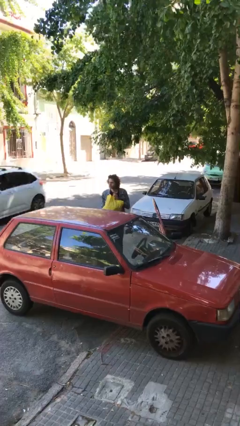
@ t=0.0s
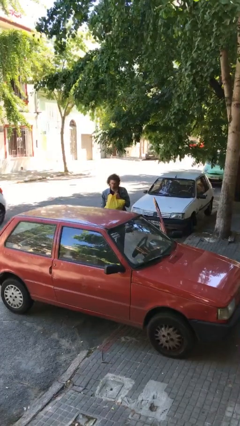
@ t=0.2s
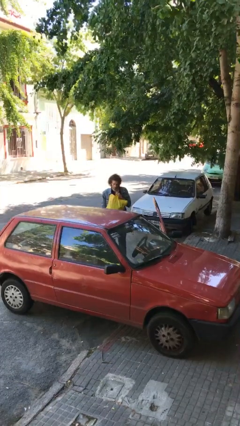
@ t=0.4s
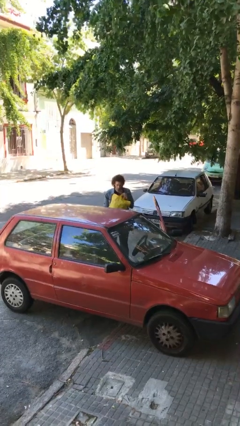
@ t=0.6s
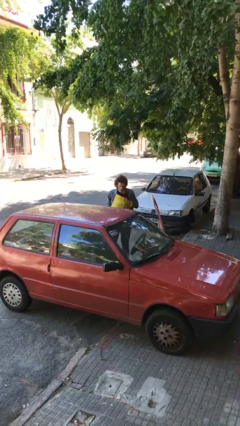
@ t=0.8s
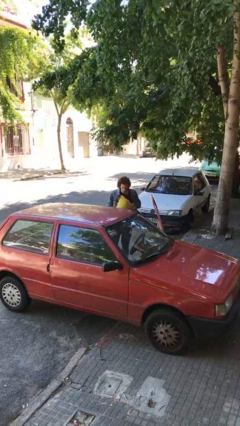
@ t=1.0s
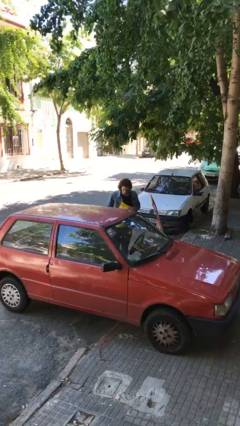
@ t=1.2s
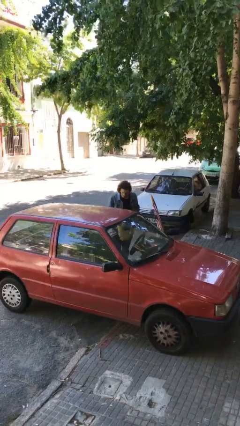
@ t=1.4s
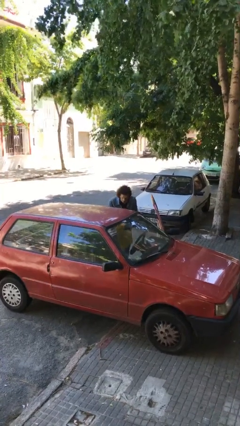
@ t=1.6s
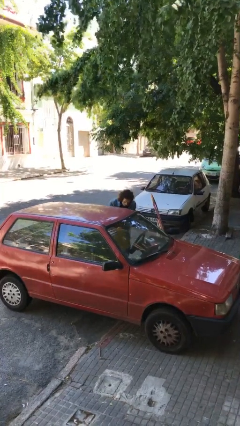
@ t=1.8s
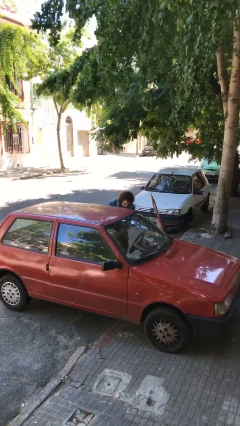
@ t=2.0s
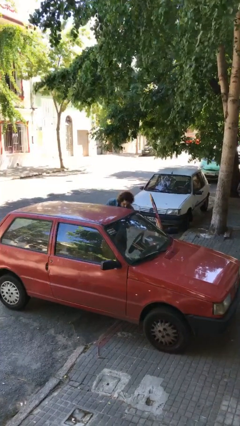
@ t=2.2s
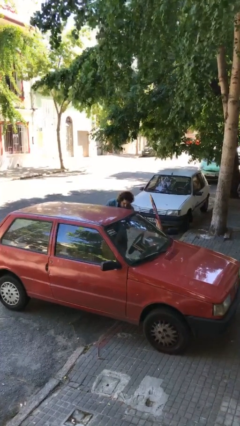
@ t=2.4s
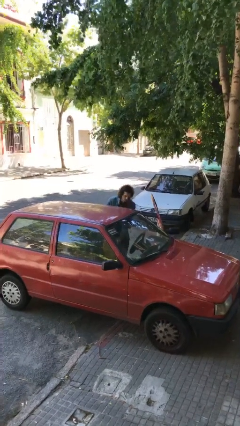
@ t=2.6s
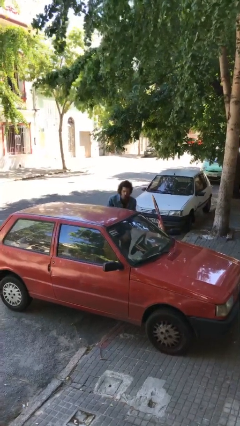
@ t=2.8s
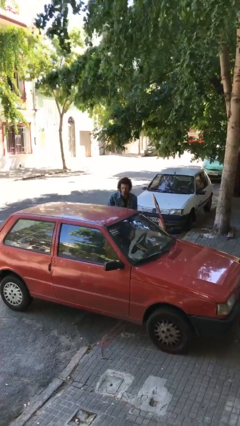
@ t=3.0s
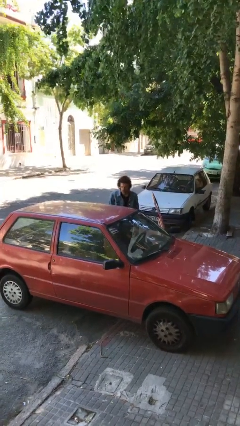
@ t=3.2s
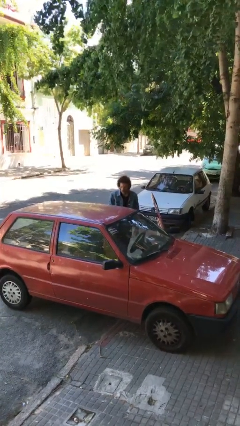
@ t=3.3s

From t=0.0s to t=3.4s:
person loads car

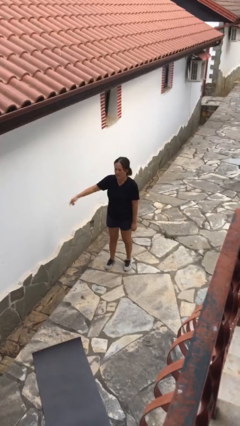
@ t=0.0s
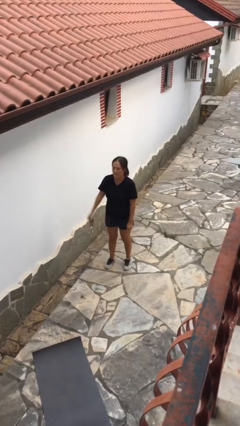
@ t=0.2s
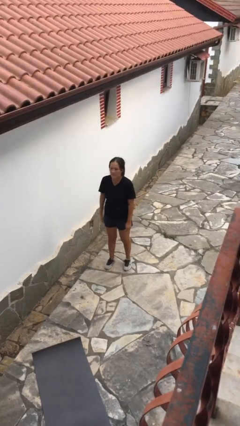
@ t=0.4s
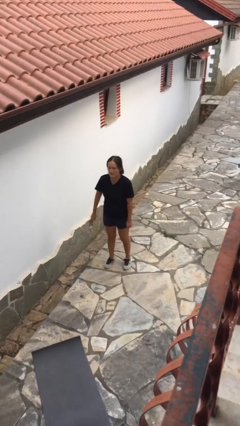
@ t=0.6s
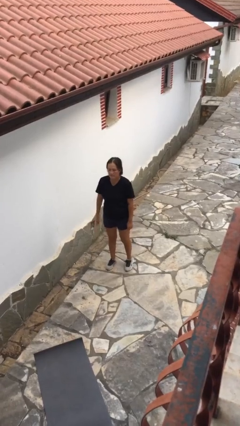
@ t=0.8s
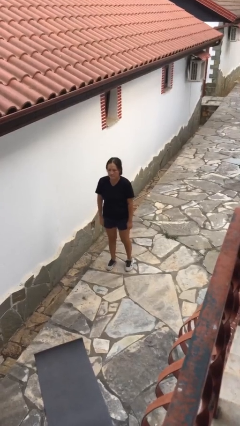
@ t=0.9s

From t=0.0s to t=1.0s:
person gestures swipe right

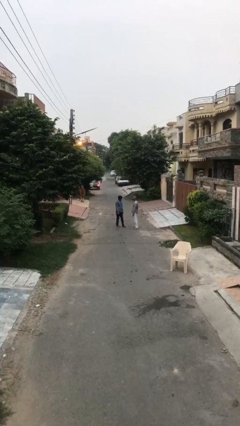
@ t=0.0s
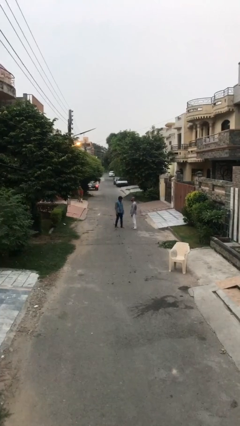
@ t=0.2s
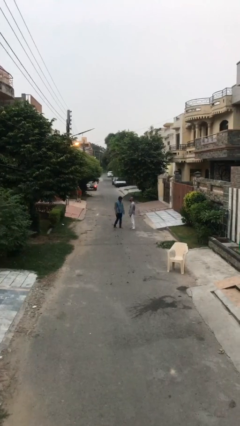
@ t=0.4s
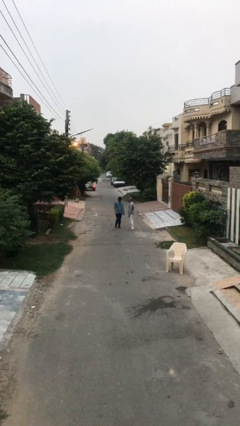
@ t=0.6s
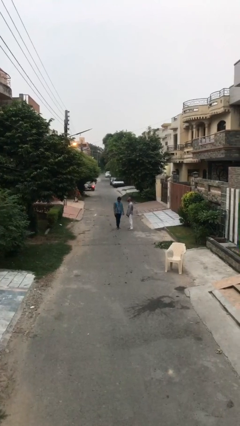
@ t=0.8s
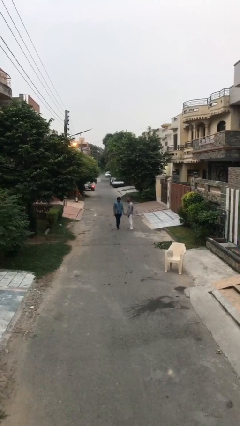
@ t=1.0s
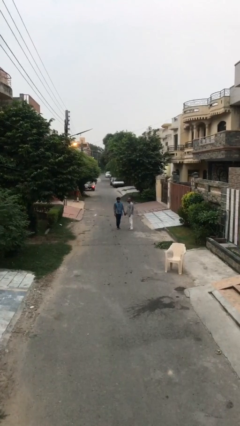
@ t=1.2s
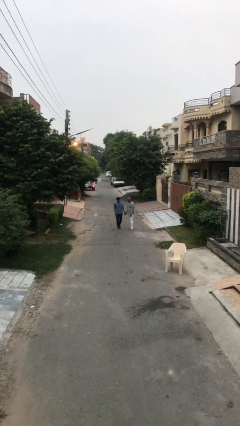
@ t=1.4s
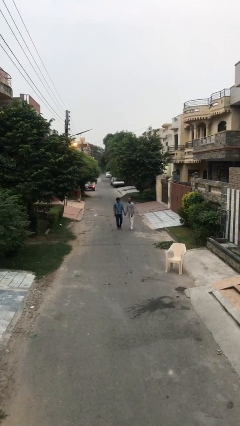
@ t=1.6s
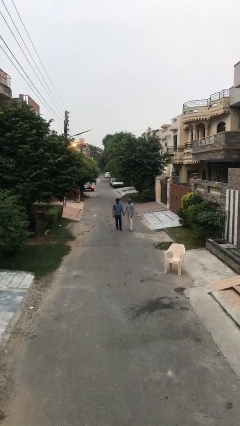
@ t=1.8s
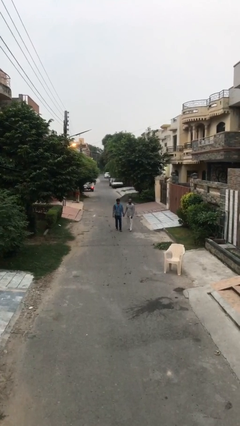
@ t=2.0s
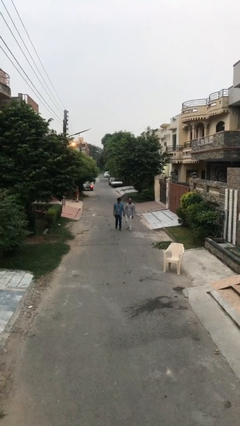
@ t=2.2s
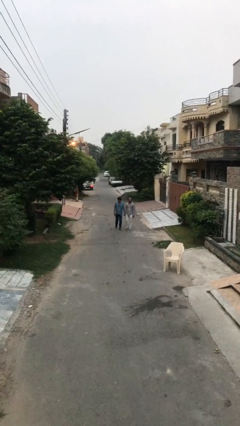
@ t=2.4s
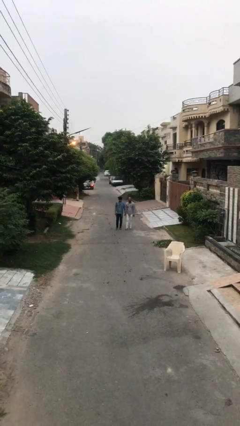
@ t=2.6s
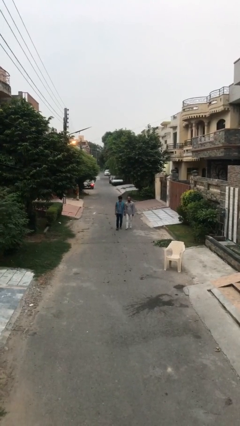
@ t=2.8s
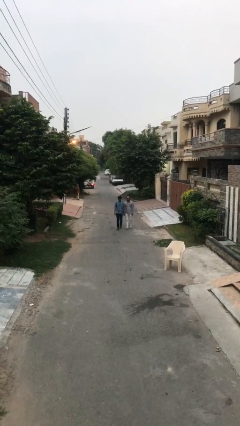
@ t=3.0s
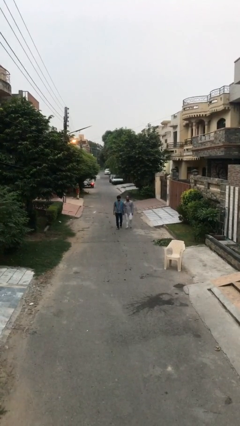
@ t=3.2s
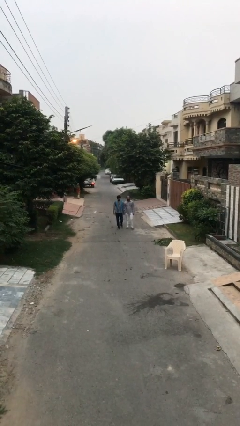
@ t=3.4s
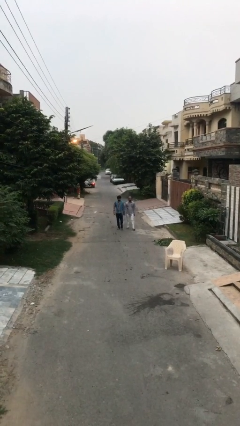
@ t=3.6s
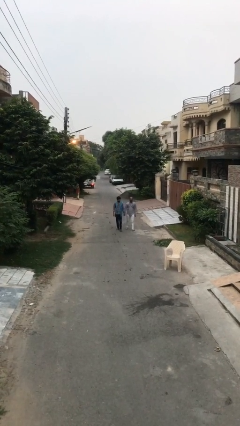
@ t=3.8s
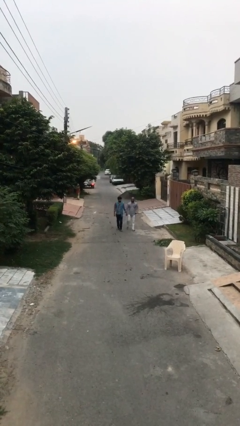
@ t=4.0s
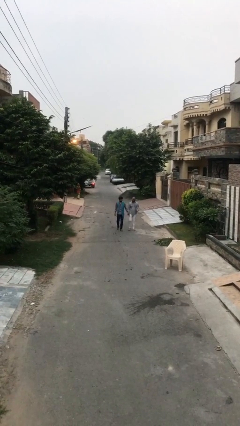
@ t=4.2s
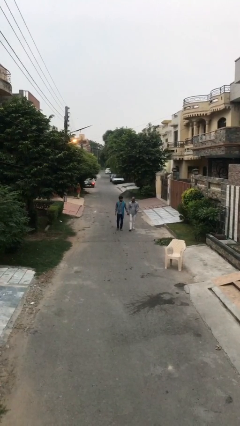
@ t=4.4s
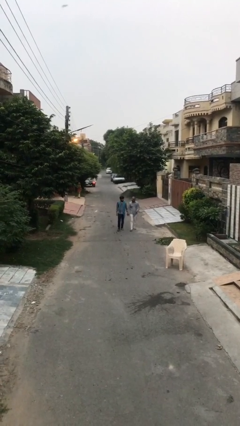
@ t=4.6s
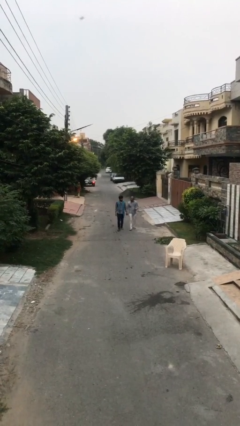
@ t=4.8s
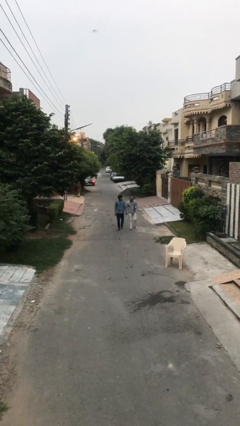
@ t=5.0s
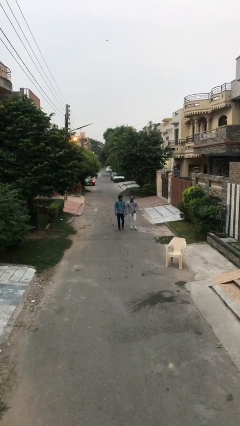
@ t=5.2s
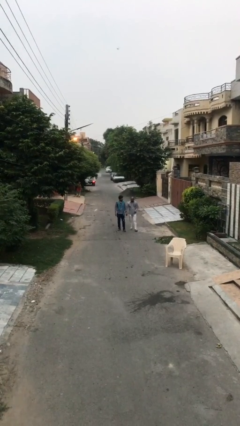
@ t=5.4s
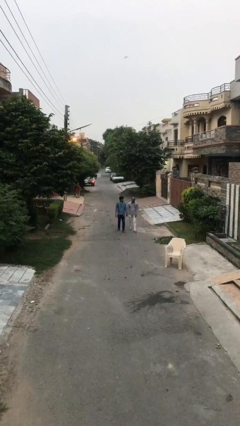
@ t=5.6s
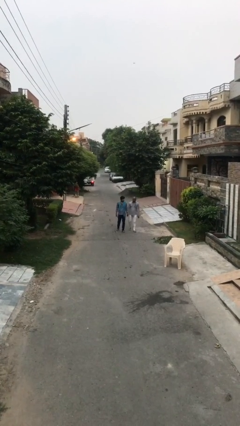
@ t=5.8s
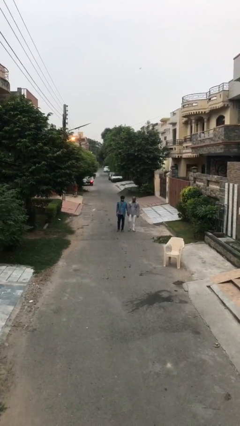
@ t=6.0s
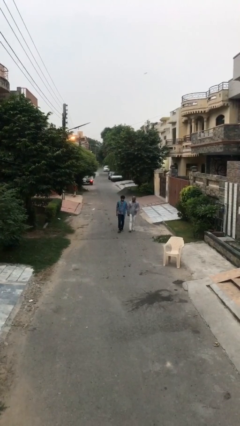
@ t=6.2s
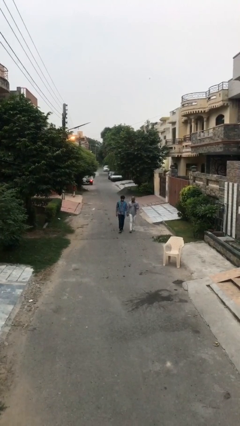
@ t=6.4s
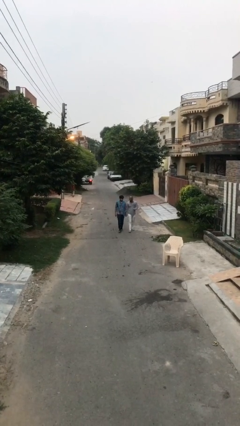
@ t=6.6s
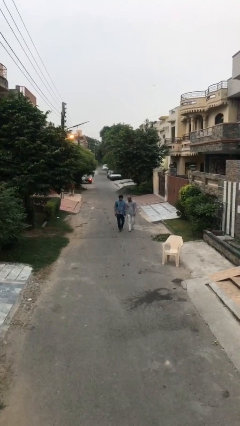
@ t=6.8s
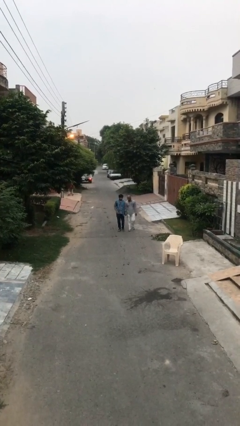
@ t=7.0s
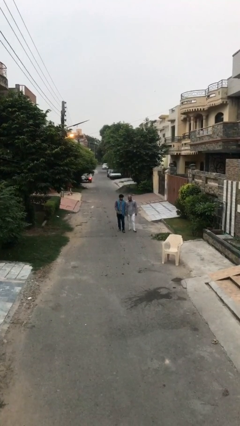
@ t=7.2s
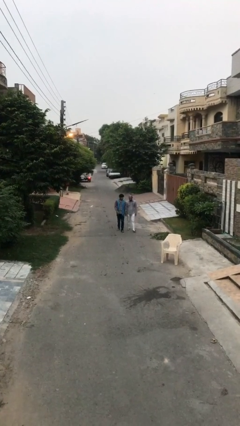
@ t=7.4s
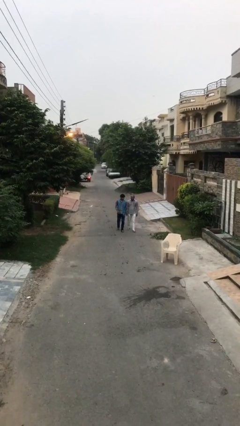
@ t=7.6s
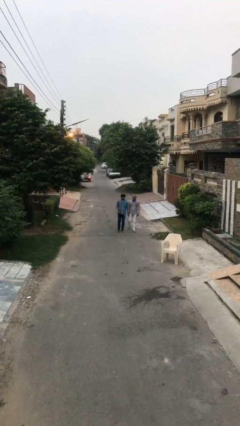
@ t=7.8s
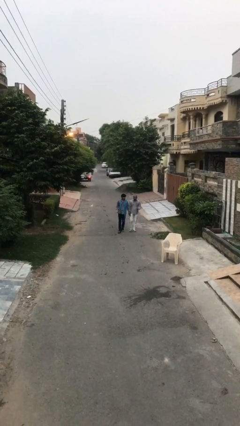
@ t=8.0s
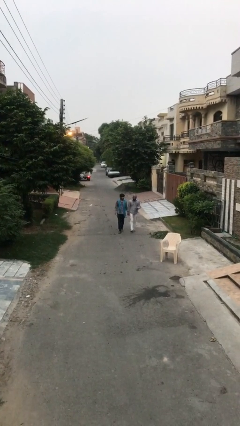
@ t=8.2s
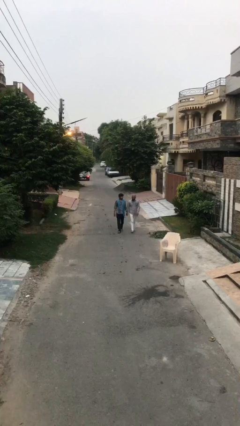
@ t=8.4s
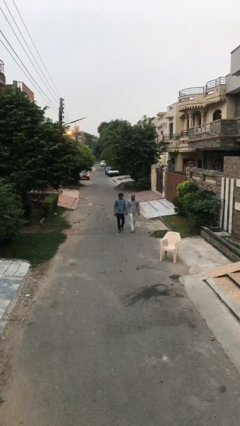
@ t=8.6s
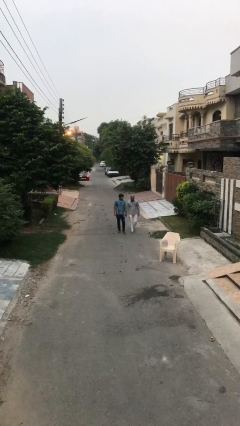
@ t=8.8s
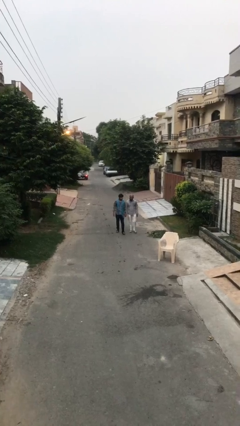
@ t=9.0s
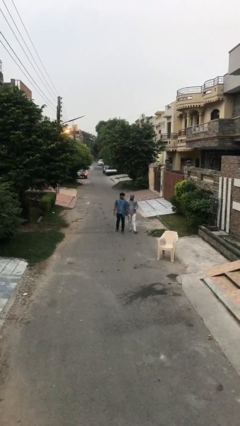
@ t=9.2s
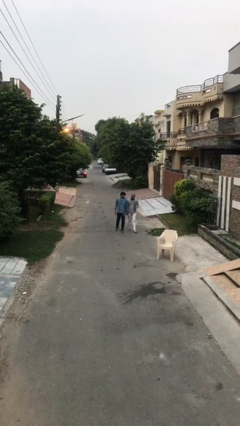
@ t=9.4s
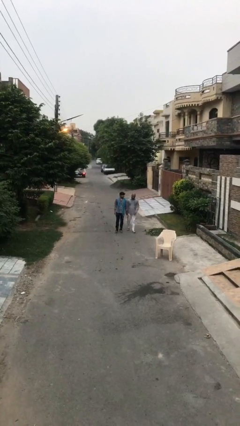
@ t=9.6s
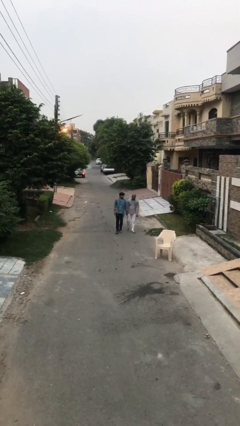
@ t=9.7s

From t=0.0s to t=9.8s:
person holds hand

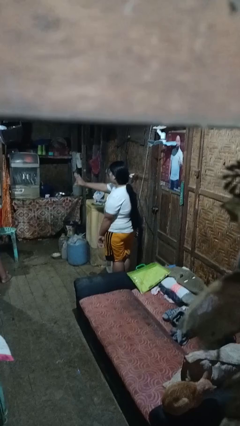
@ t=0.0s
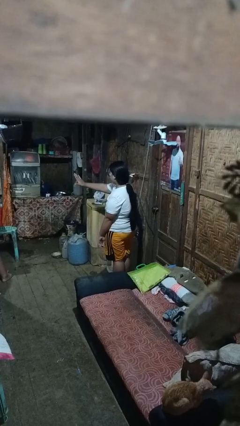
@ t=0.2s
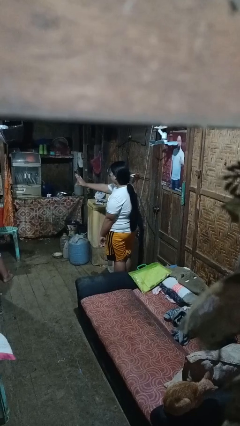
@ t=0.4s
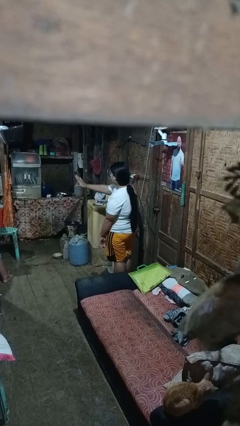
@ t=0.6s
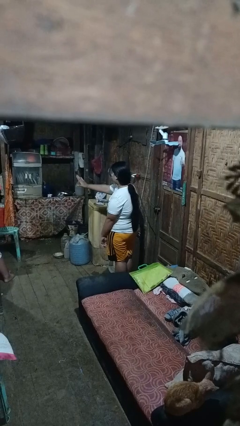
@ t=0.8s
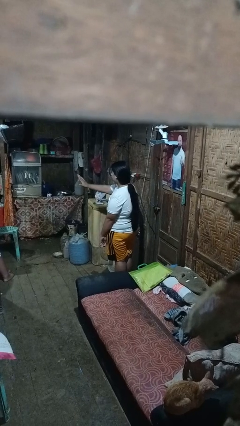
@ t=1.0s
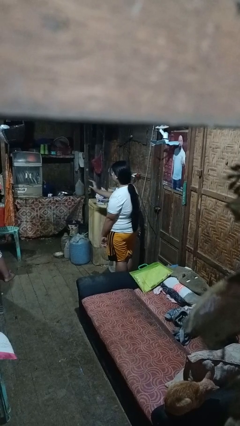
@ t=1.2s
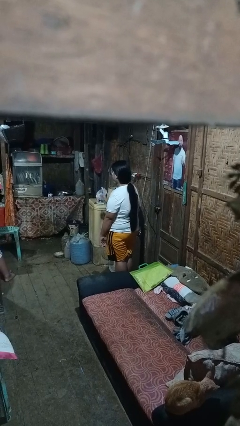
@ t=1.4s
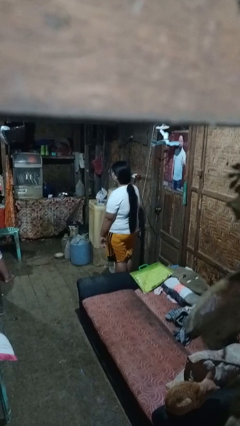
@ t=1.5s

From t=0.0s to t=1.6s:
person gestures stop

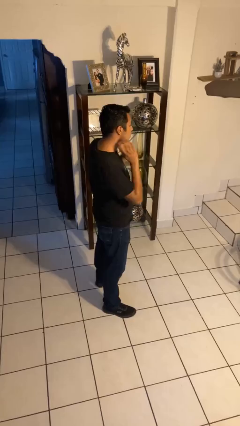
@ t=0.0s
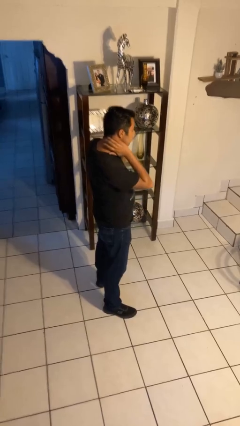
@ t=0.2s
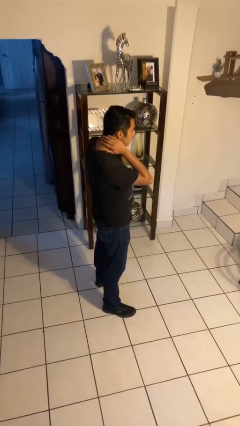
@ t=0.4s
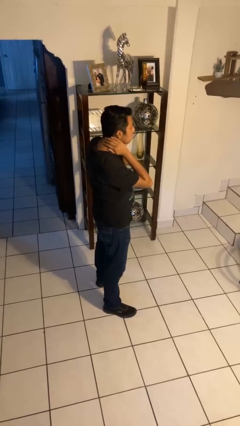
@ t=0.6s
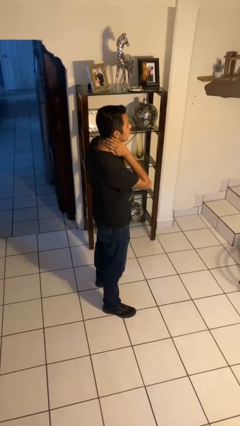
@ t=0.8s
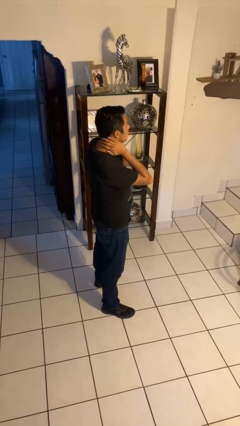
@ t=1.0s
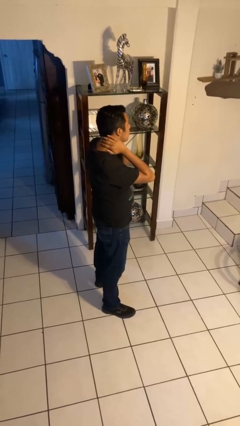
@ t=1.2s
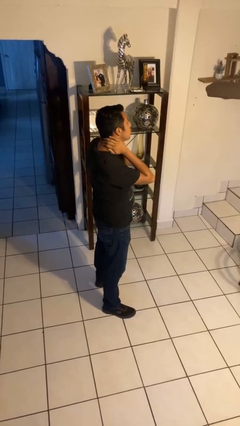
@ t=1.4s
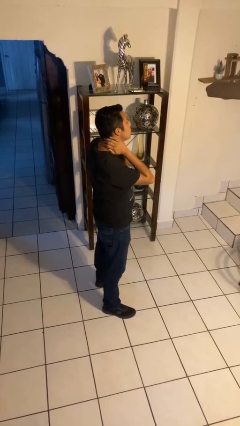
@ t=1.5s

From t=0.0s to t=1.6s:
person rubs neck
